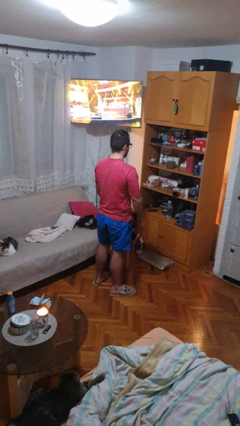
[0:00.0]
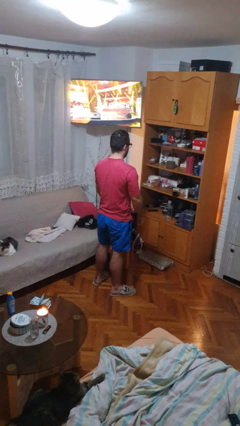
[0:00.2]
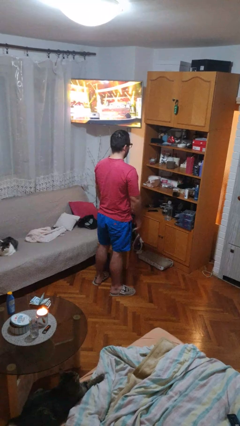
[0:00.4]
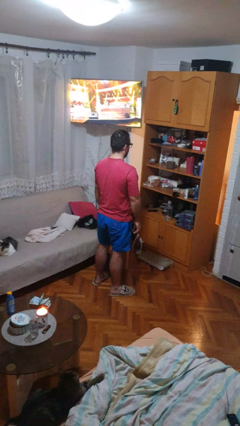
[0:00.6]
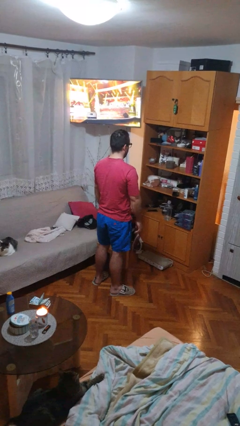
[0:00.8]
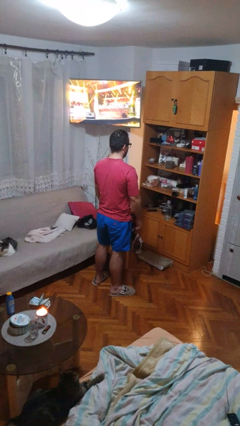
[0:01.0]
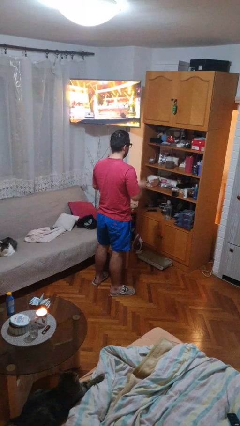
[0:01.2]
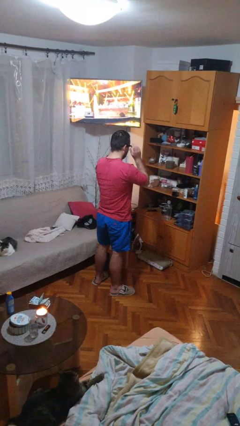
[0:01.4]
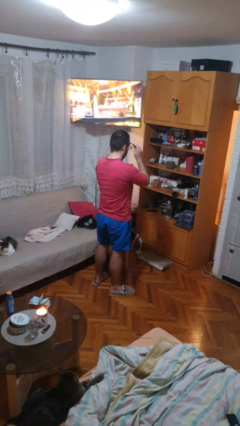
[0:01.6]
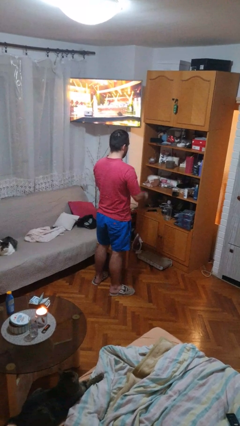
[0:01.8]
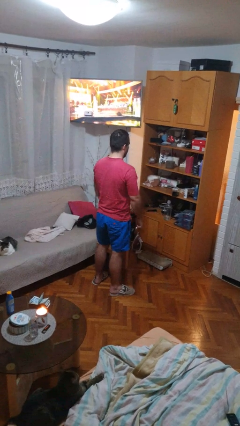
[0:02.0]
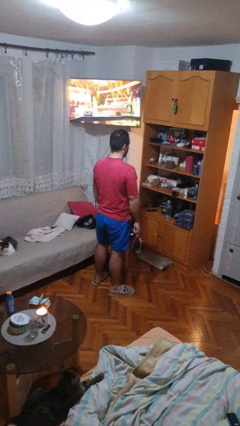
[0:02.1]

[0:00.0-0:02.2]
person takes off glasses

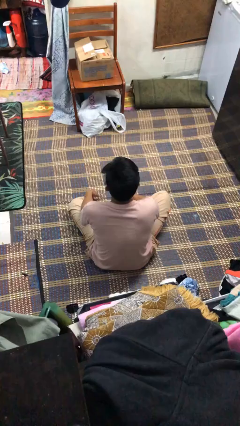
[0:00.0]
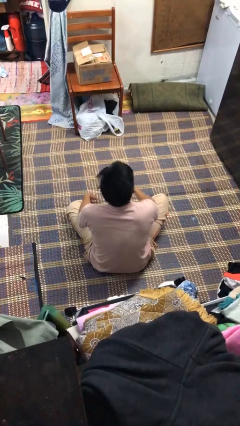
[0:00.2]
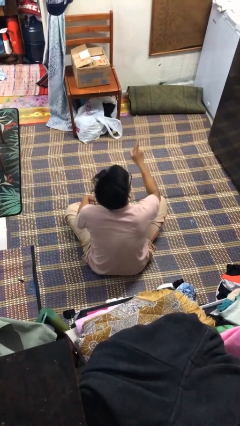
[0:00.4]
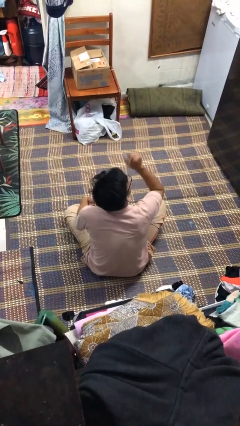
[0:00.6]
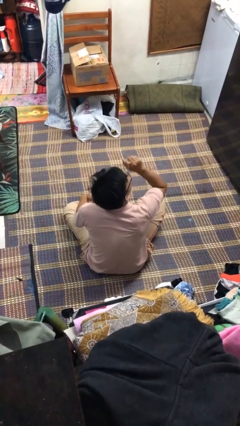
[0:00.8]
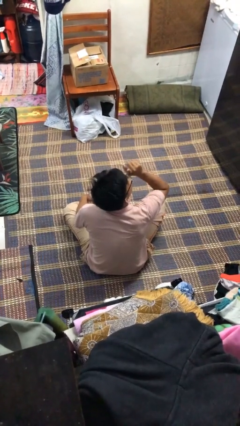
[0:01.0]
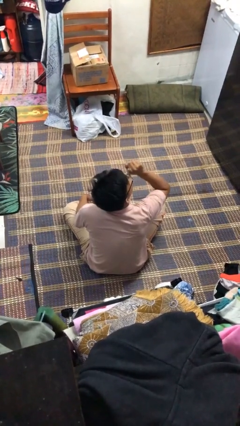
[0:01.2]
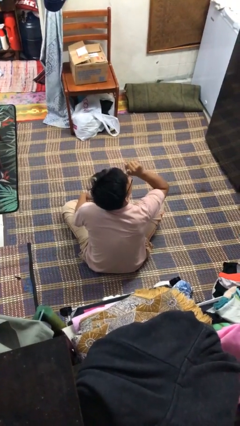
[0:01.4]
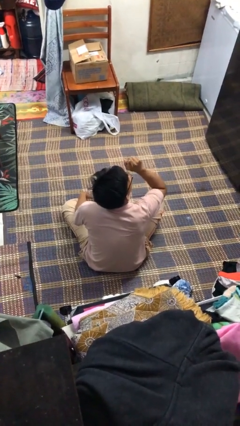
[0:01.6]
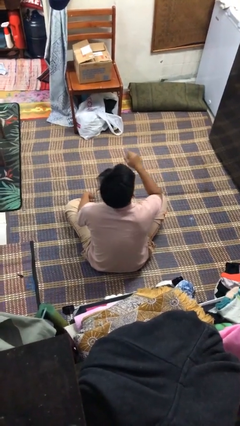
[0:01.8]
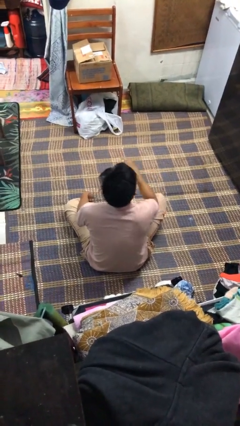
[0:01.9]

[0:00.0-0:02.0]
person gestures be quiet

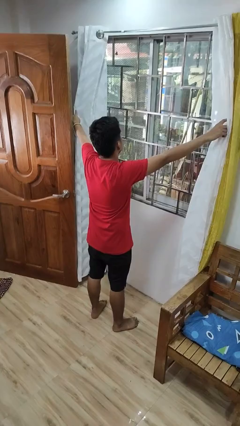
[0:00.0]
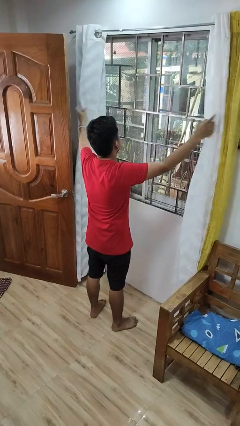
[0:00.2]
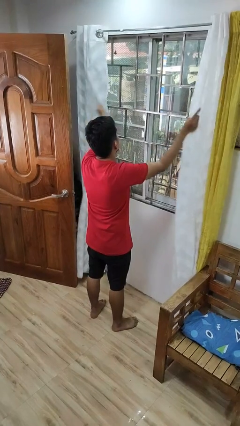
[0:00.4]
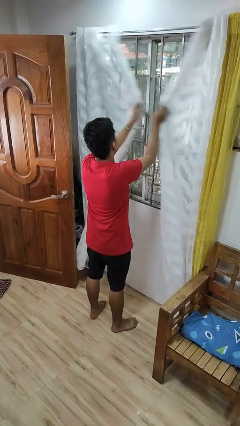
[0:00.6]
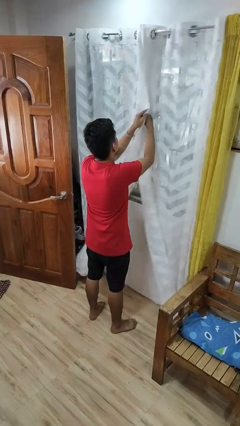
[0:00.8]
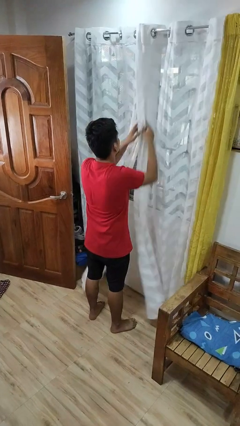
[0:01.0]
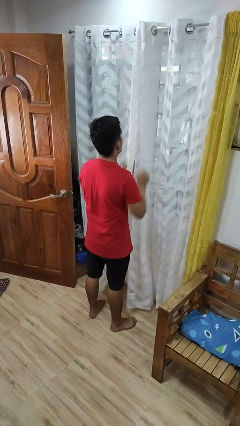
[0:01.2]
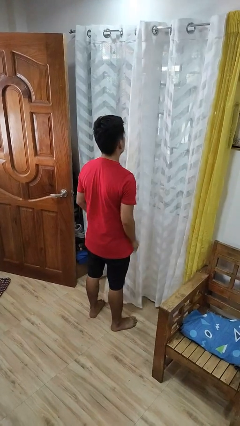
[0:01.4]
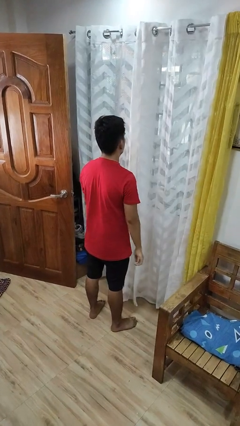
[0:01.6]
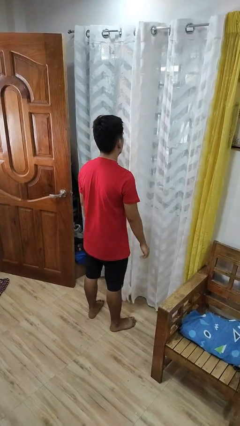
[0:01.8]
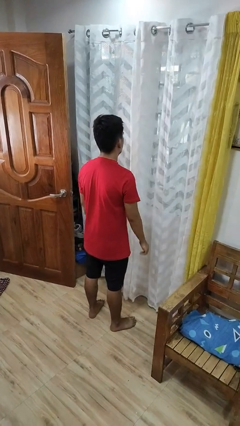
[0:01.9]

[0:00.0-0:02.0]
person closes curtains

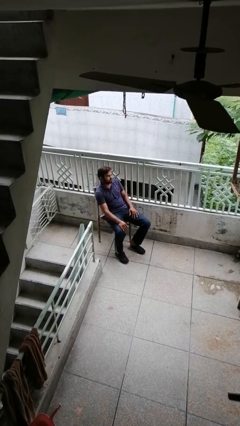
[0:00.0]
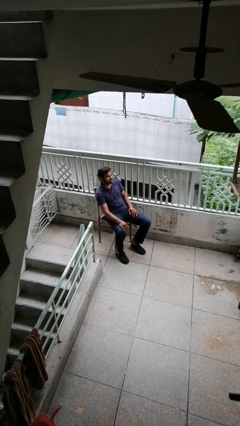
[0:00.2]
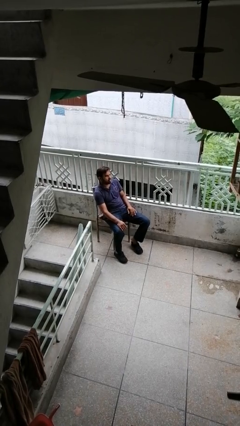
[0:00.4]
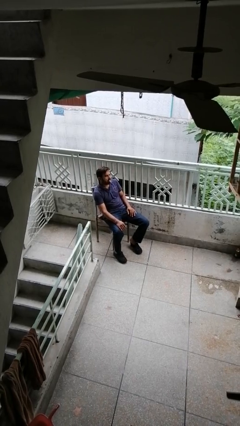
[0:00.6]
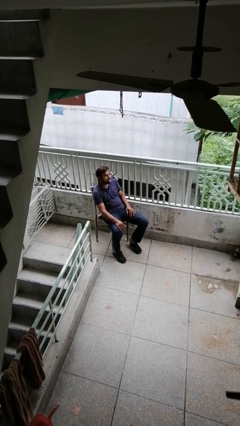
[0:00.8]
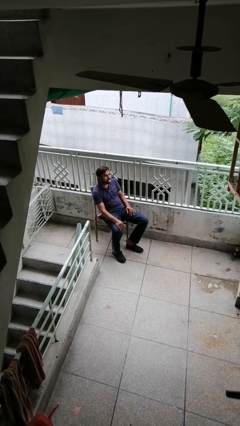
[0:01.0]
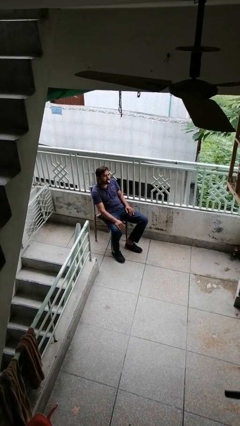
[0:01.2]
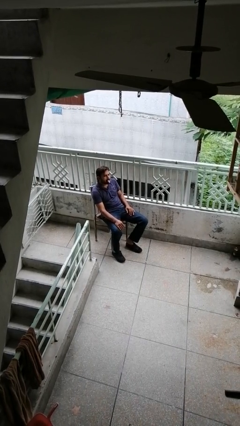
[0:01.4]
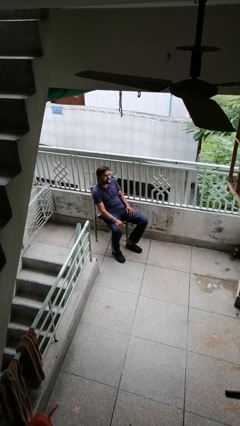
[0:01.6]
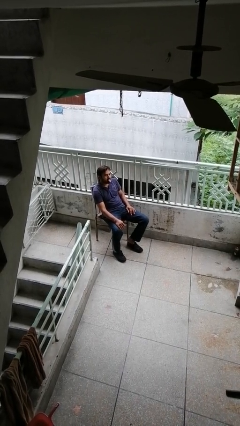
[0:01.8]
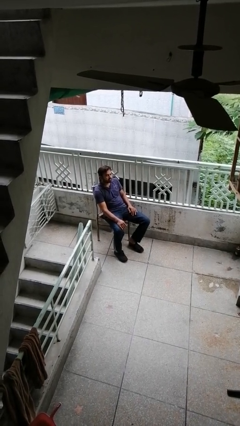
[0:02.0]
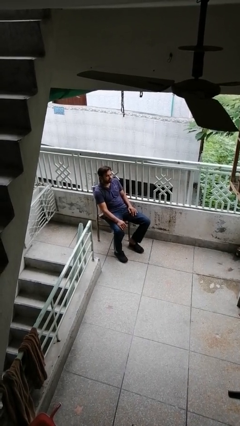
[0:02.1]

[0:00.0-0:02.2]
person sticks out tongue

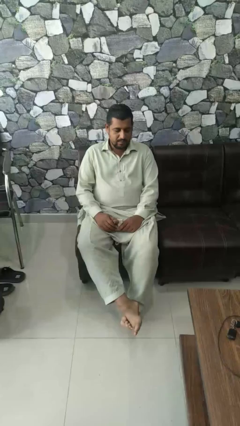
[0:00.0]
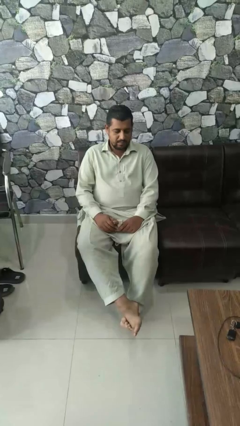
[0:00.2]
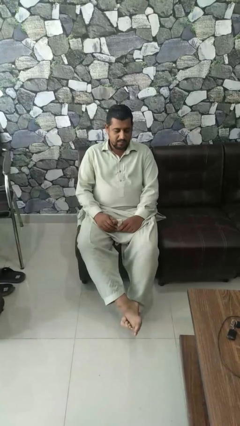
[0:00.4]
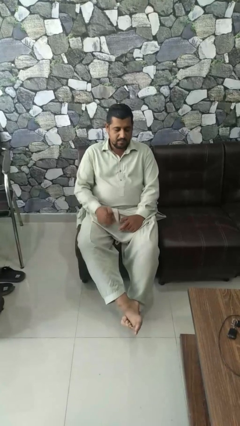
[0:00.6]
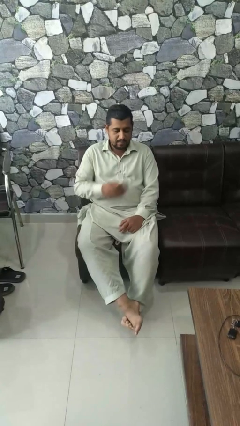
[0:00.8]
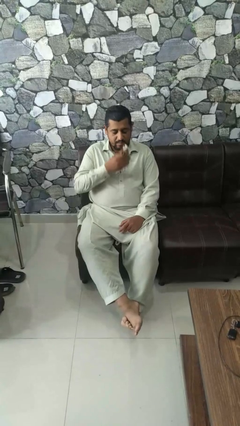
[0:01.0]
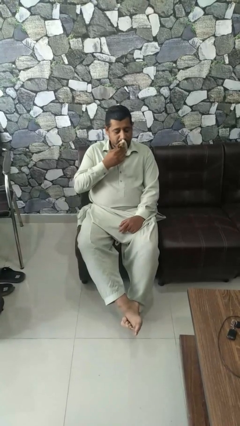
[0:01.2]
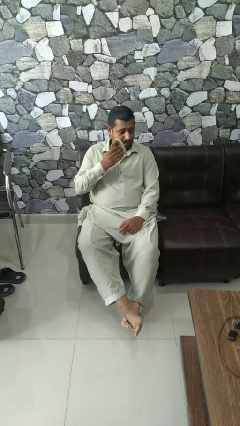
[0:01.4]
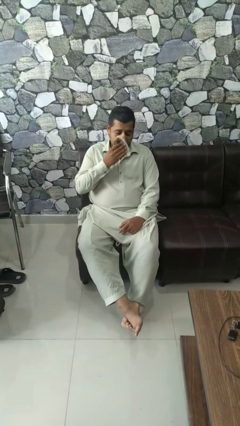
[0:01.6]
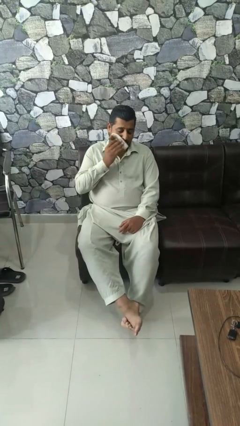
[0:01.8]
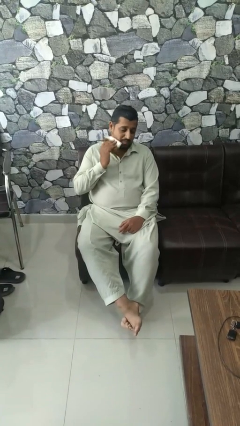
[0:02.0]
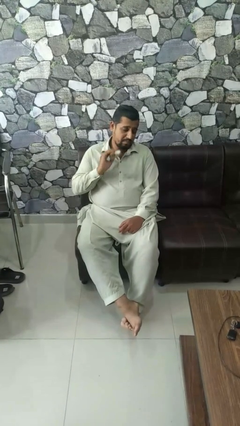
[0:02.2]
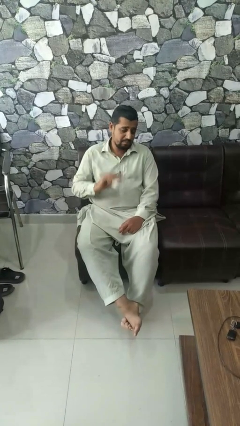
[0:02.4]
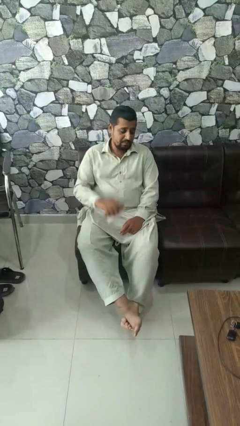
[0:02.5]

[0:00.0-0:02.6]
person wipes mouth with napkin

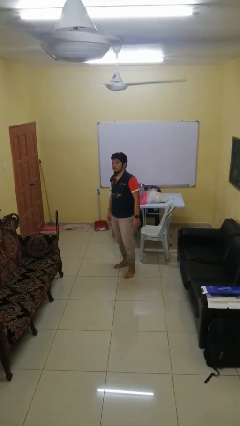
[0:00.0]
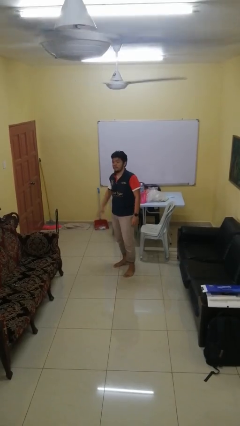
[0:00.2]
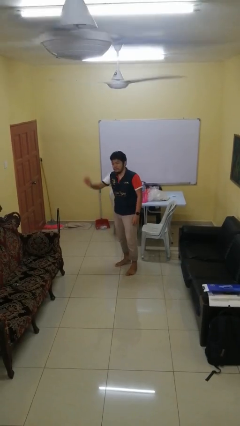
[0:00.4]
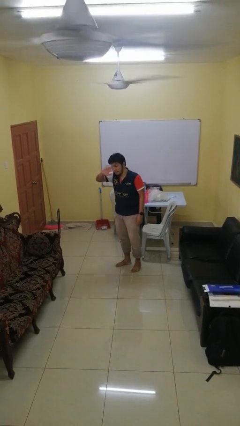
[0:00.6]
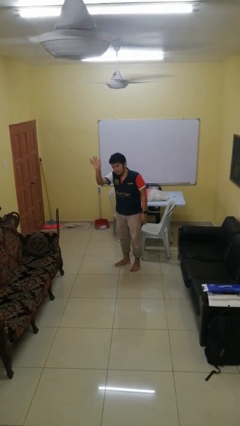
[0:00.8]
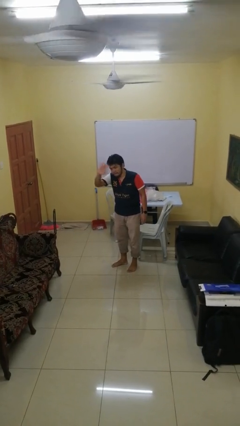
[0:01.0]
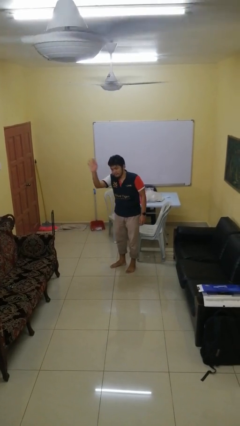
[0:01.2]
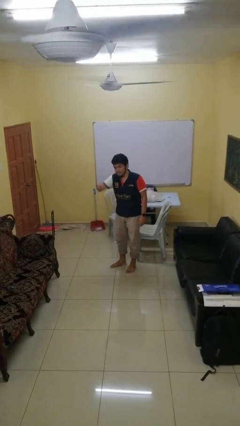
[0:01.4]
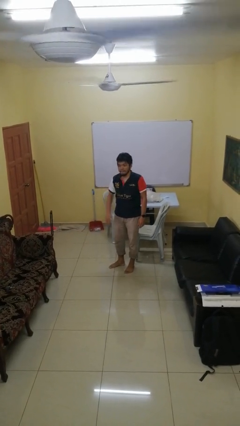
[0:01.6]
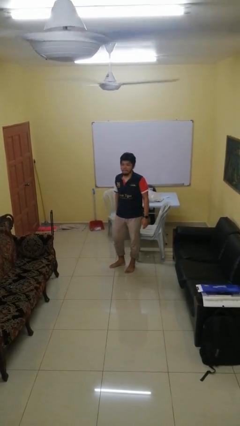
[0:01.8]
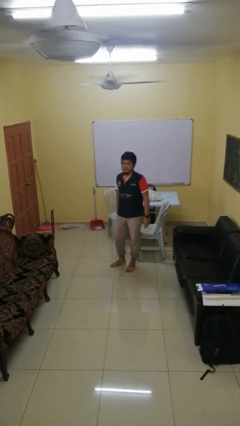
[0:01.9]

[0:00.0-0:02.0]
person waves at person

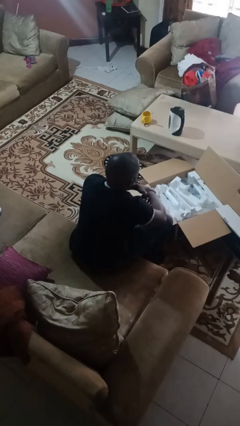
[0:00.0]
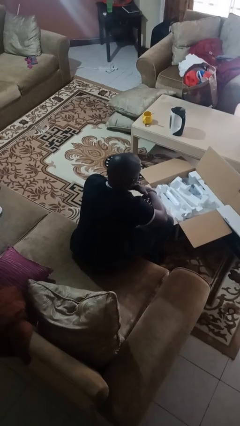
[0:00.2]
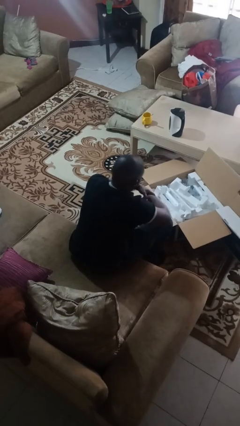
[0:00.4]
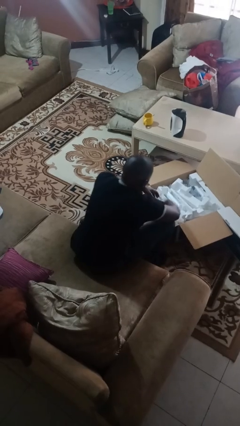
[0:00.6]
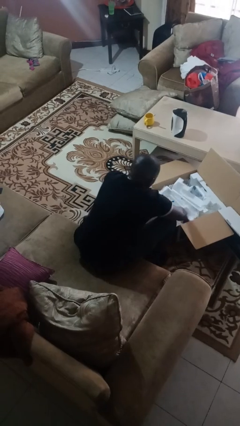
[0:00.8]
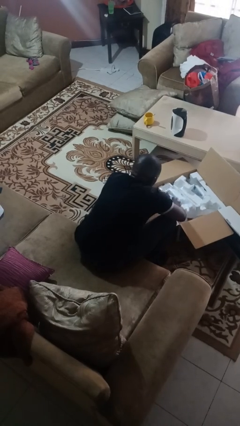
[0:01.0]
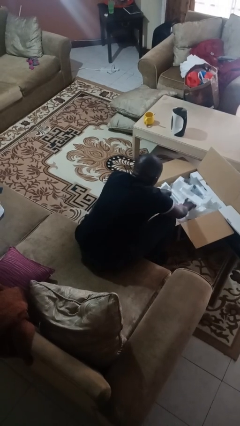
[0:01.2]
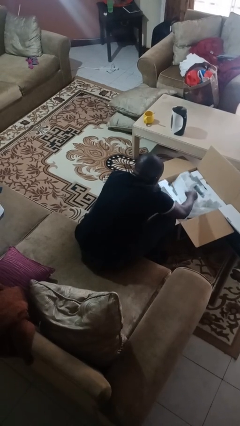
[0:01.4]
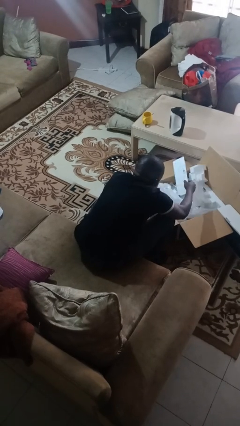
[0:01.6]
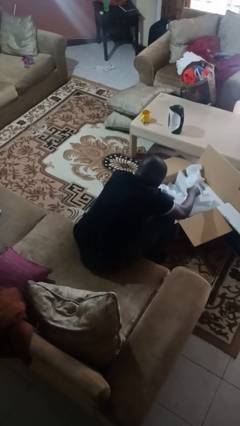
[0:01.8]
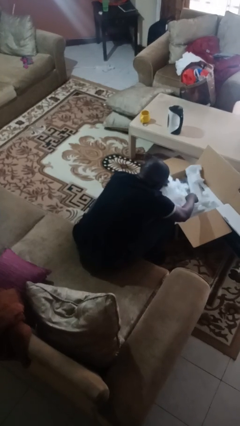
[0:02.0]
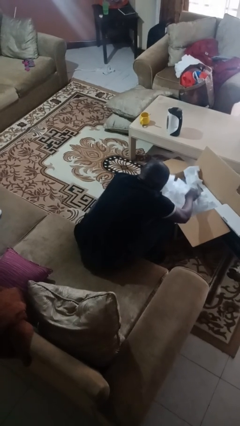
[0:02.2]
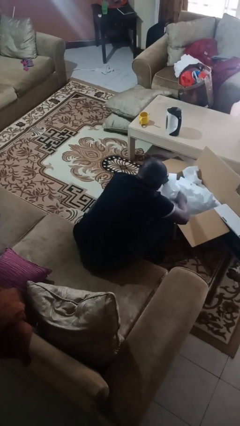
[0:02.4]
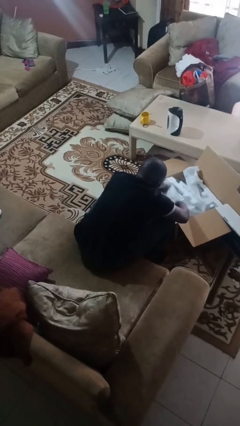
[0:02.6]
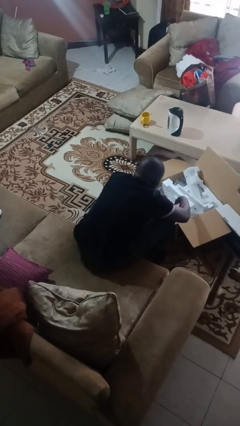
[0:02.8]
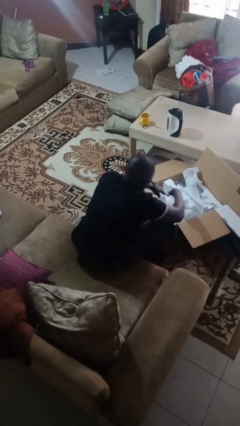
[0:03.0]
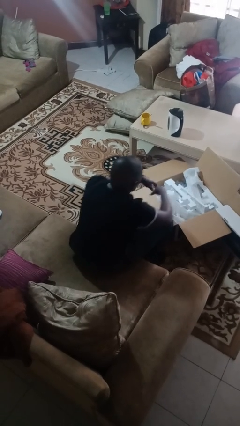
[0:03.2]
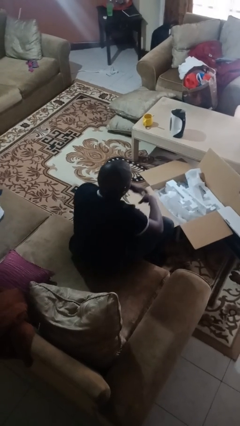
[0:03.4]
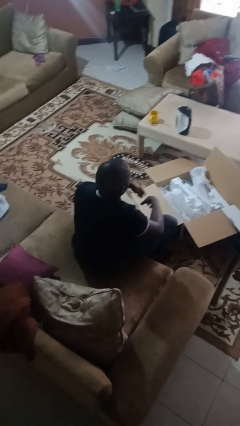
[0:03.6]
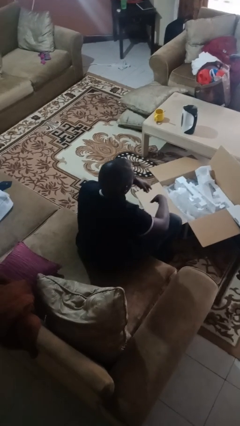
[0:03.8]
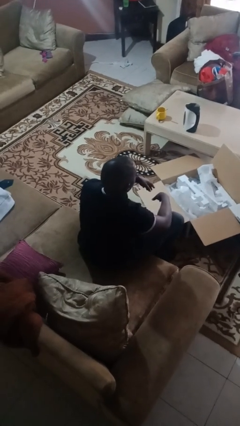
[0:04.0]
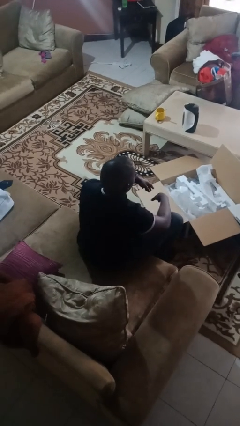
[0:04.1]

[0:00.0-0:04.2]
person searches in box
